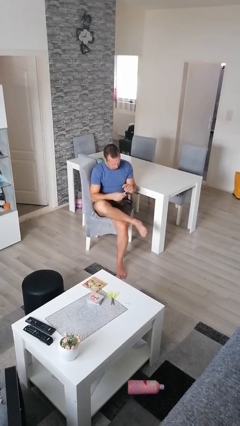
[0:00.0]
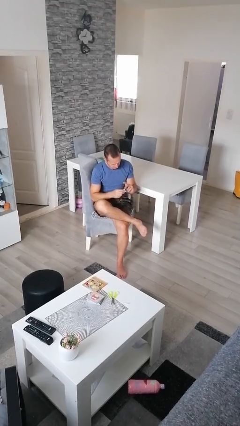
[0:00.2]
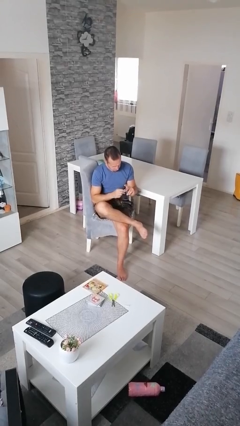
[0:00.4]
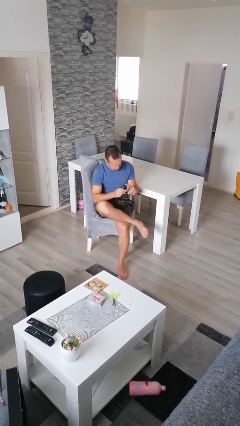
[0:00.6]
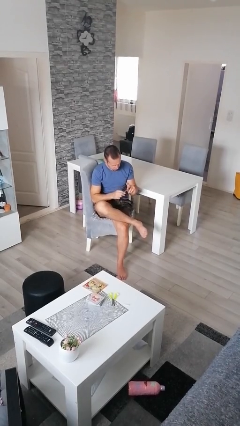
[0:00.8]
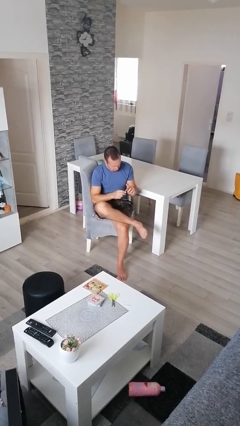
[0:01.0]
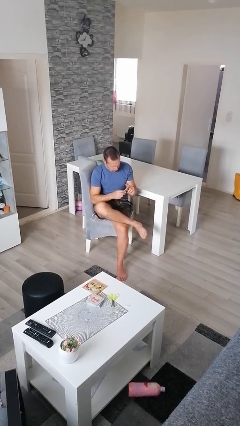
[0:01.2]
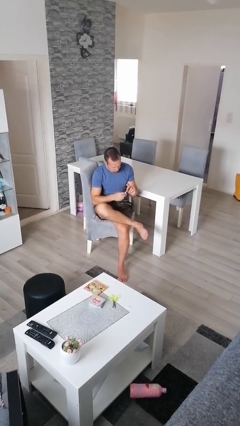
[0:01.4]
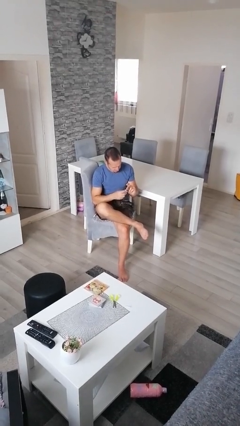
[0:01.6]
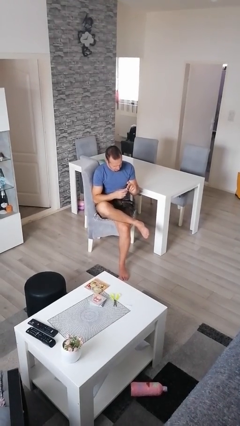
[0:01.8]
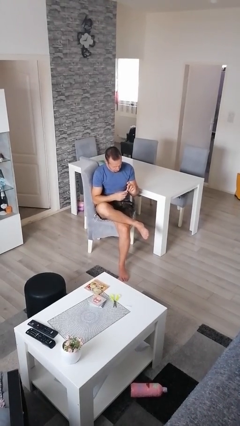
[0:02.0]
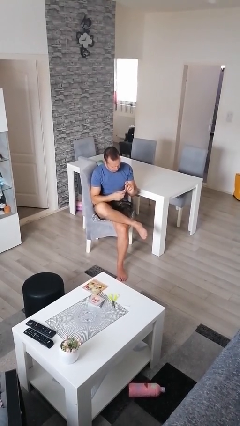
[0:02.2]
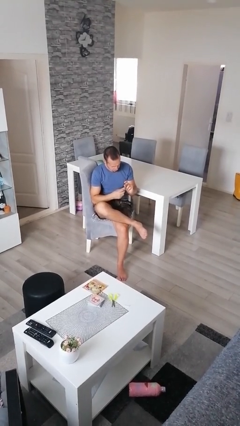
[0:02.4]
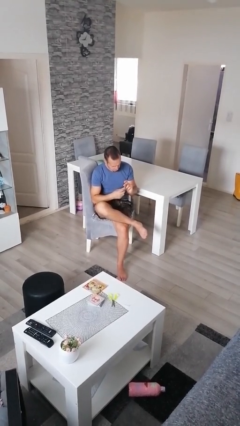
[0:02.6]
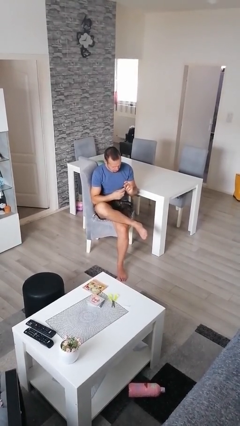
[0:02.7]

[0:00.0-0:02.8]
person files fingernails

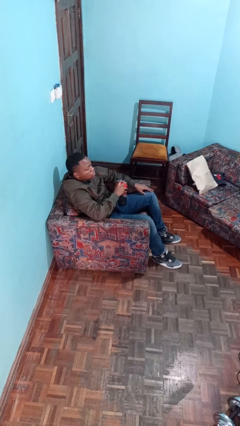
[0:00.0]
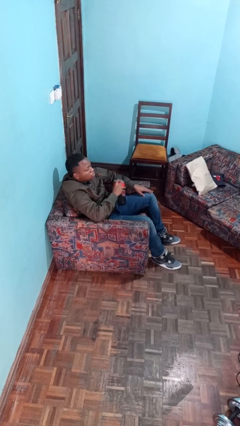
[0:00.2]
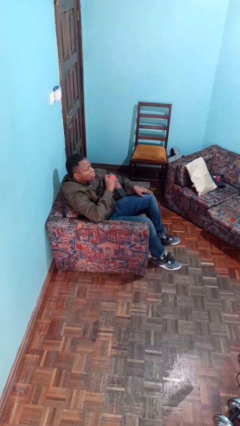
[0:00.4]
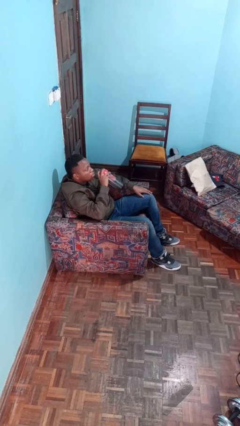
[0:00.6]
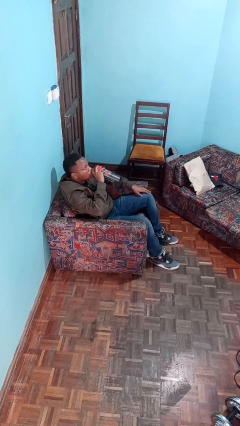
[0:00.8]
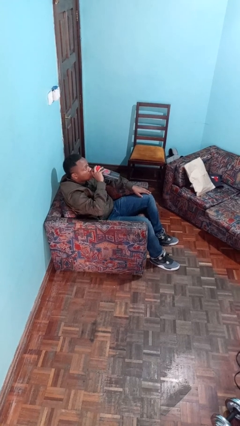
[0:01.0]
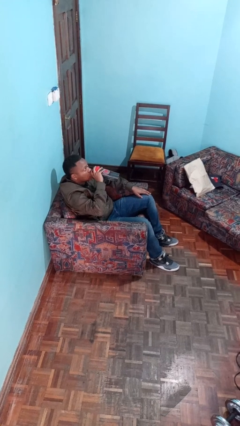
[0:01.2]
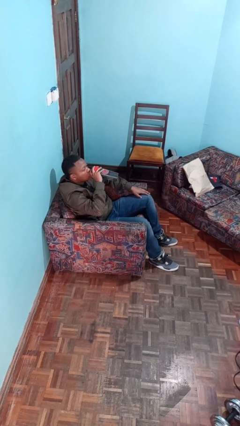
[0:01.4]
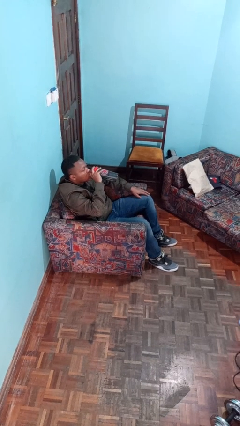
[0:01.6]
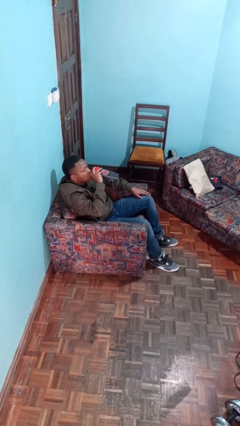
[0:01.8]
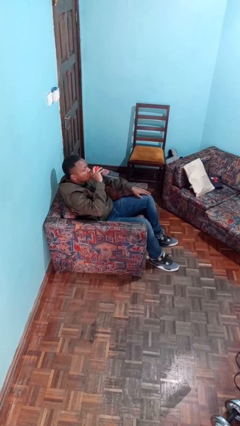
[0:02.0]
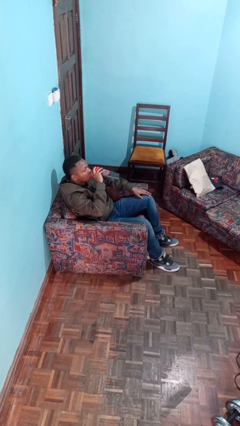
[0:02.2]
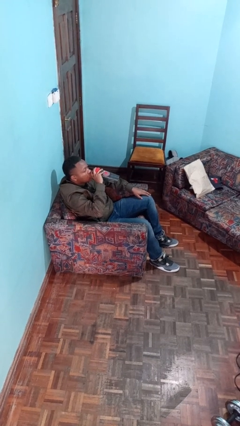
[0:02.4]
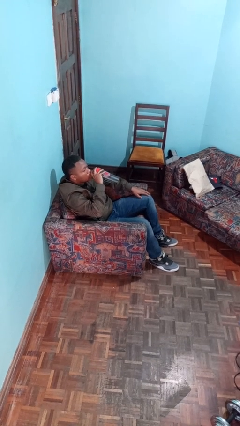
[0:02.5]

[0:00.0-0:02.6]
person drinks from bottle

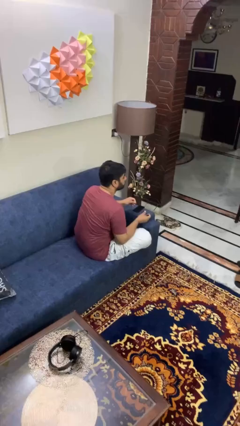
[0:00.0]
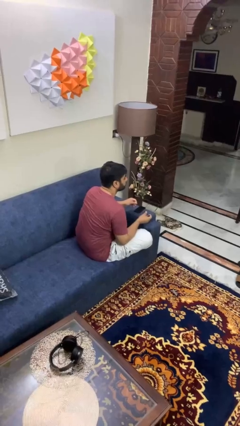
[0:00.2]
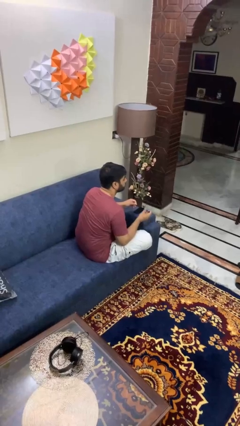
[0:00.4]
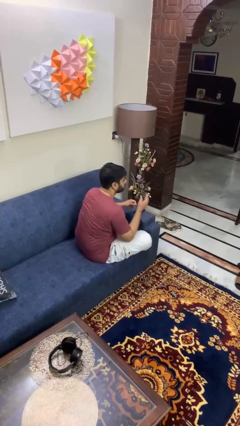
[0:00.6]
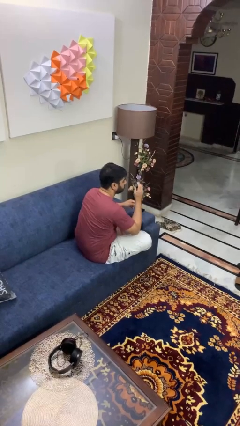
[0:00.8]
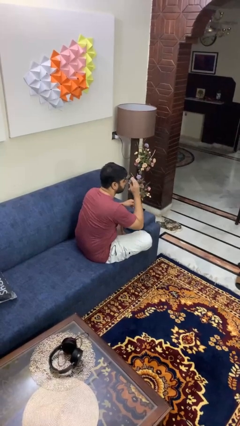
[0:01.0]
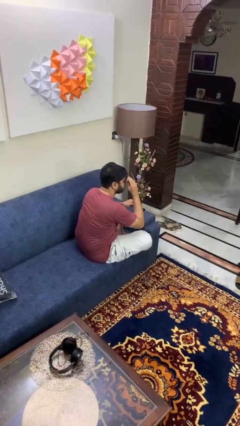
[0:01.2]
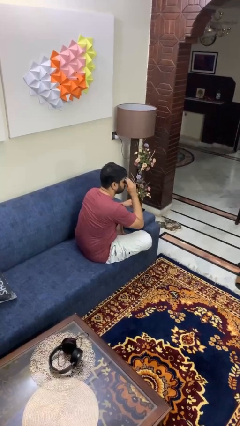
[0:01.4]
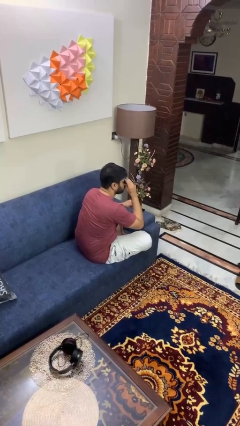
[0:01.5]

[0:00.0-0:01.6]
person puts on glasses

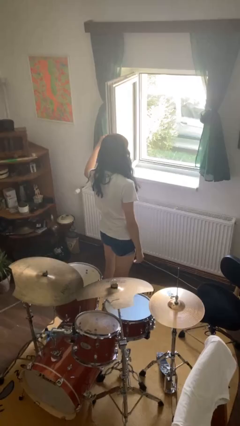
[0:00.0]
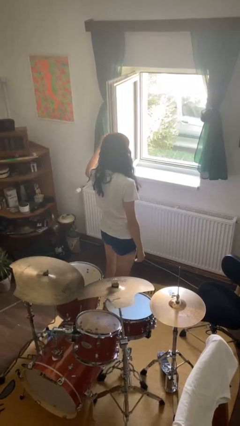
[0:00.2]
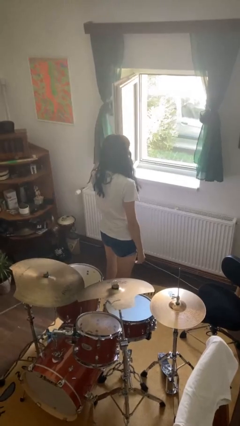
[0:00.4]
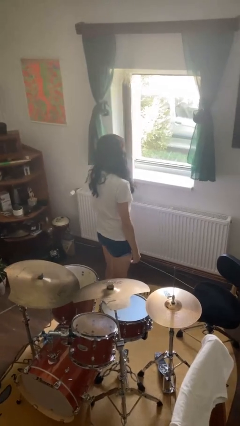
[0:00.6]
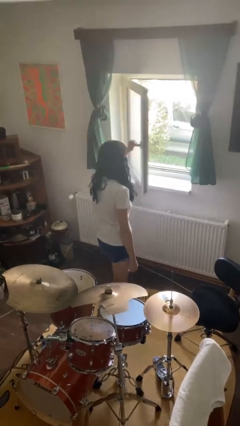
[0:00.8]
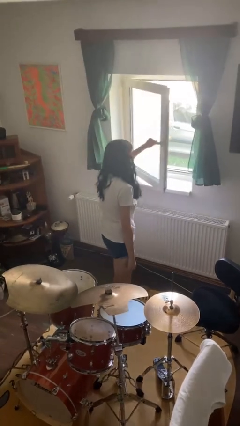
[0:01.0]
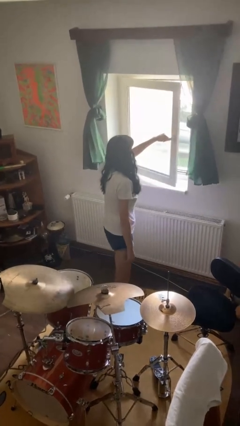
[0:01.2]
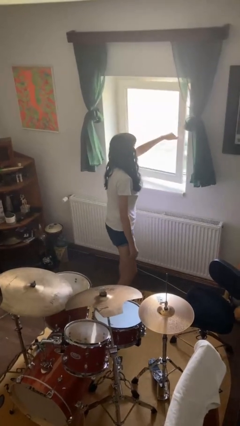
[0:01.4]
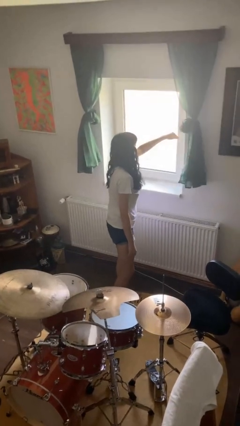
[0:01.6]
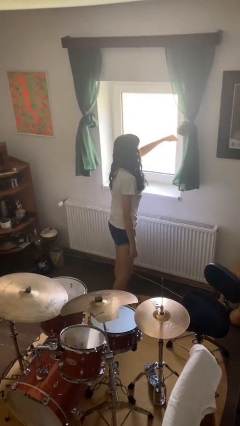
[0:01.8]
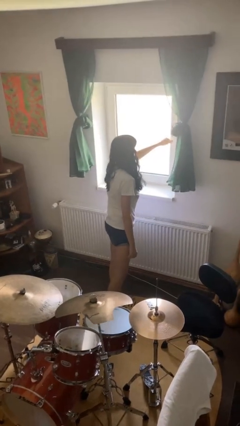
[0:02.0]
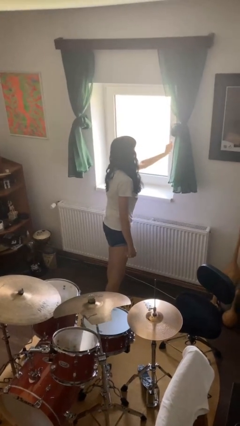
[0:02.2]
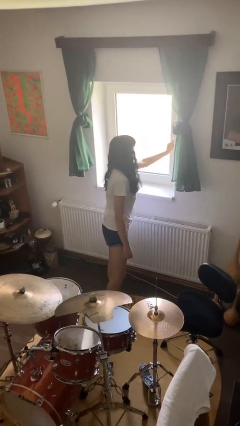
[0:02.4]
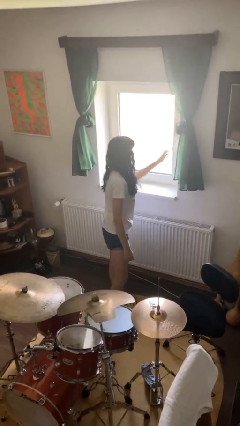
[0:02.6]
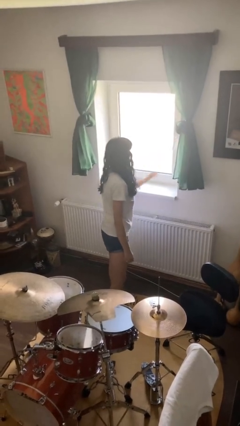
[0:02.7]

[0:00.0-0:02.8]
person closes home window

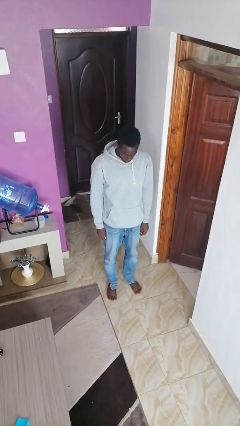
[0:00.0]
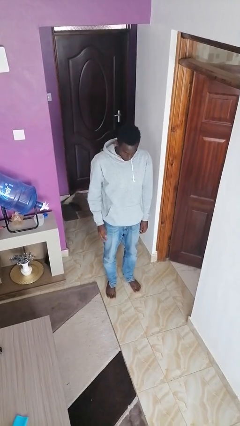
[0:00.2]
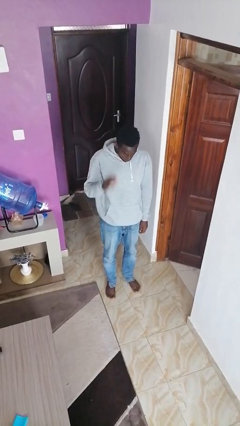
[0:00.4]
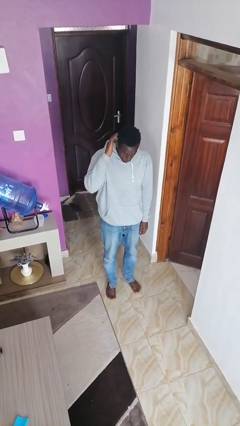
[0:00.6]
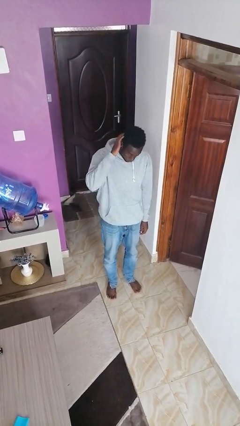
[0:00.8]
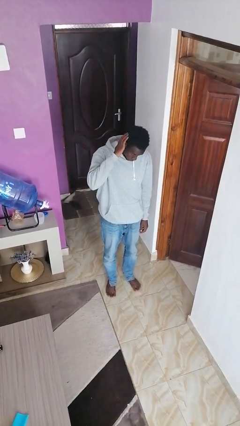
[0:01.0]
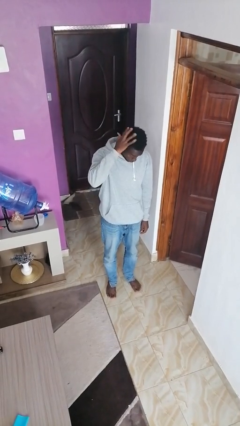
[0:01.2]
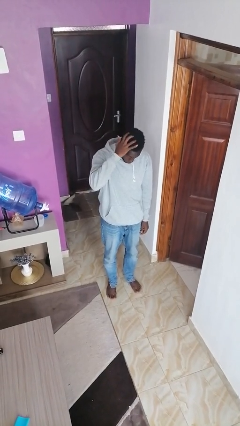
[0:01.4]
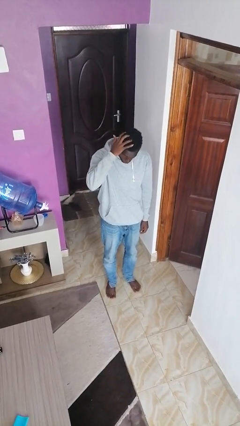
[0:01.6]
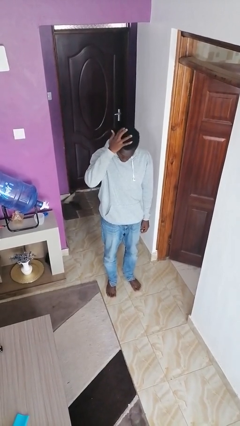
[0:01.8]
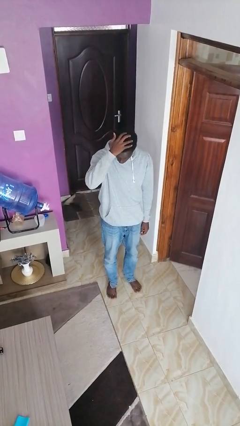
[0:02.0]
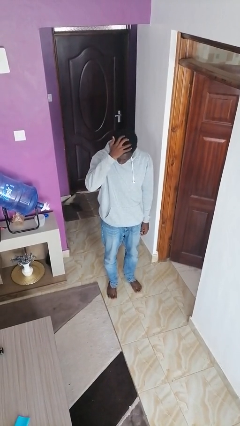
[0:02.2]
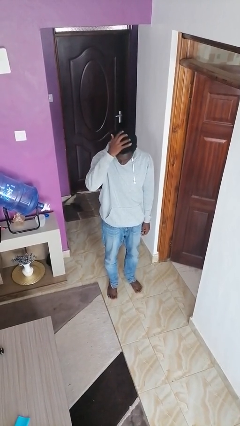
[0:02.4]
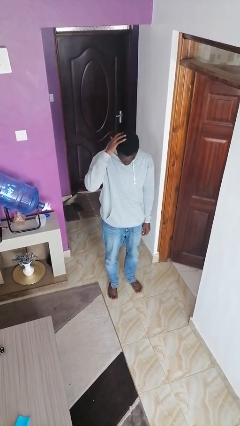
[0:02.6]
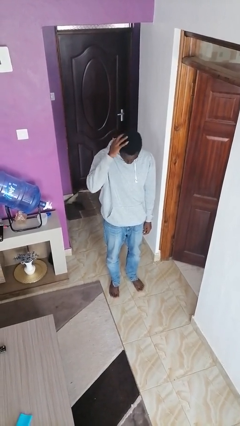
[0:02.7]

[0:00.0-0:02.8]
person strokes hair

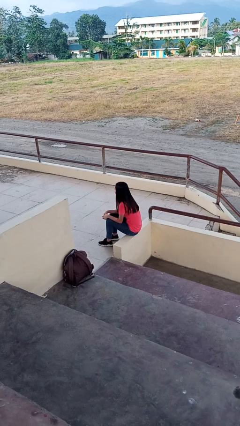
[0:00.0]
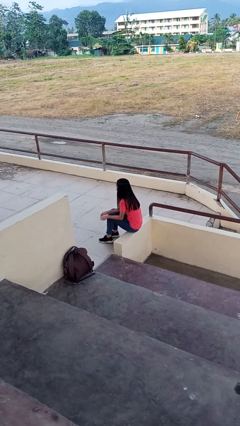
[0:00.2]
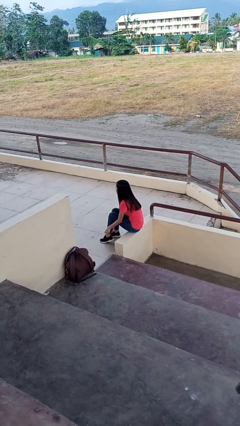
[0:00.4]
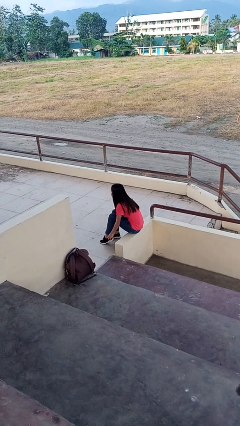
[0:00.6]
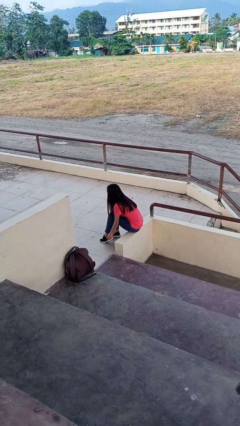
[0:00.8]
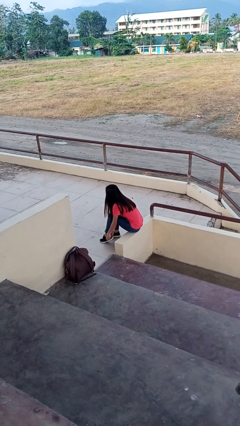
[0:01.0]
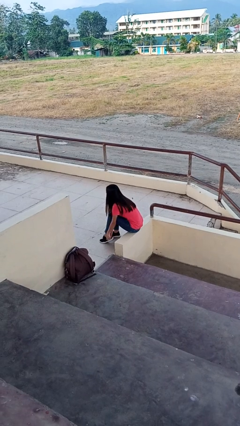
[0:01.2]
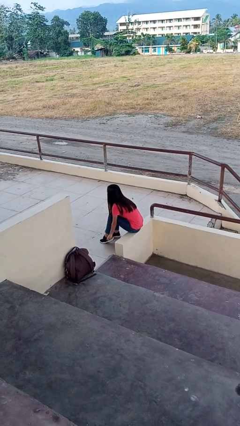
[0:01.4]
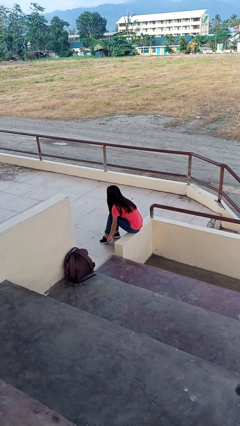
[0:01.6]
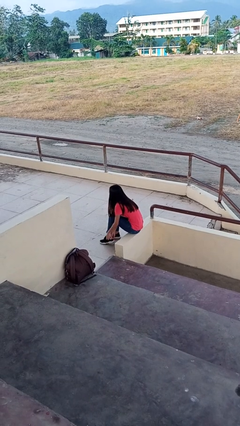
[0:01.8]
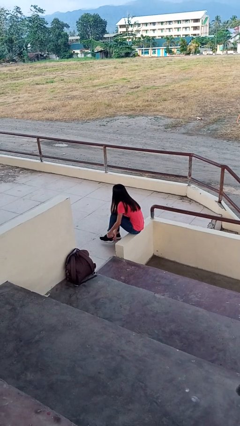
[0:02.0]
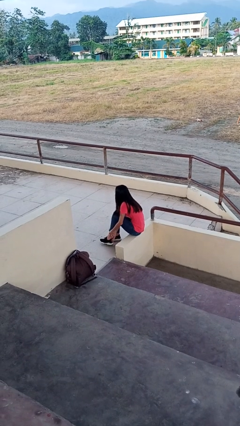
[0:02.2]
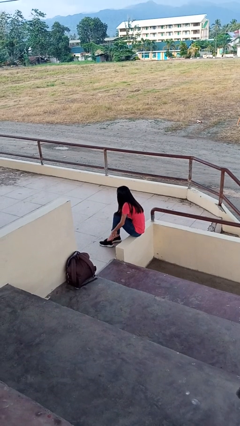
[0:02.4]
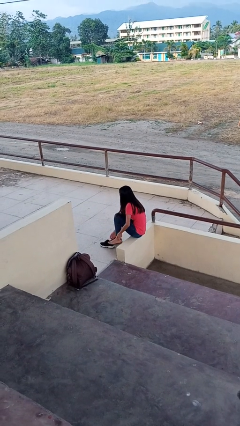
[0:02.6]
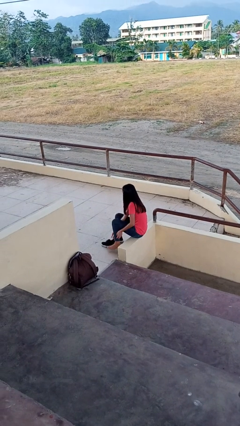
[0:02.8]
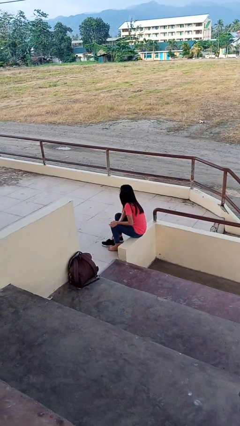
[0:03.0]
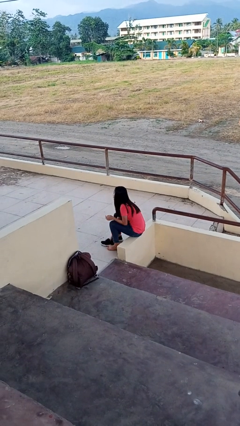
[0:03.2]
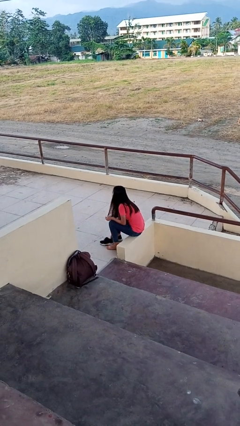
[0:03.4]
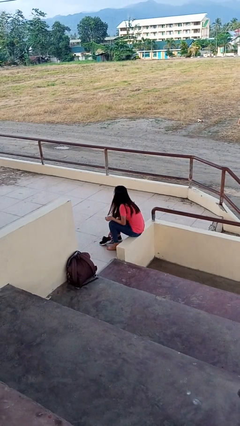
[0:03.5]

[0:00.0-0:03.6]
person takes off shoes

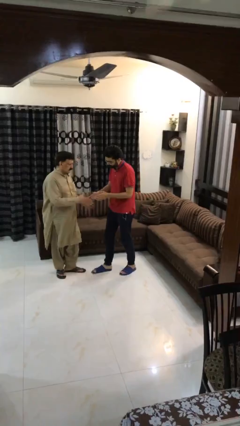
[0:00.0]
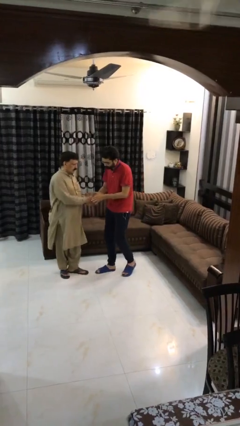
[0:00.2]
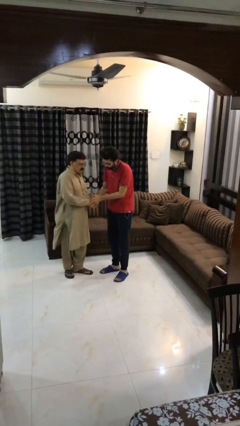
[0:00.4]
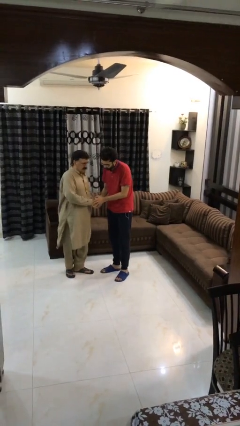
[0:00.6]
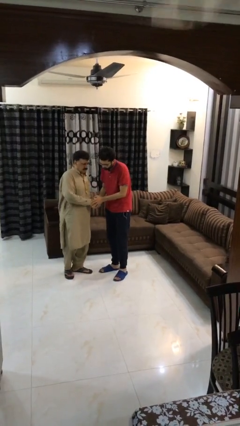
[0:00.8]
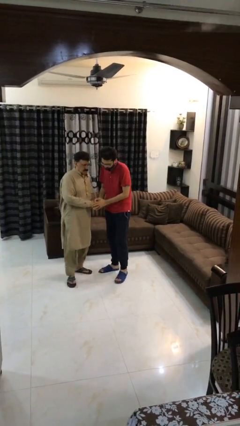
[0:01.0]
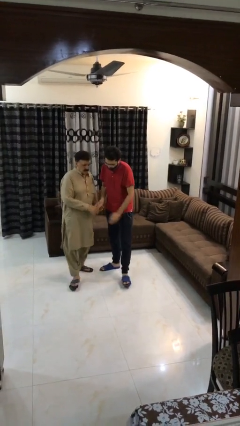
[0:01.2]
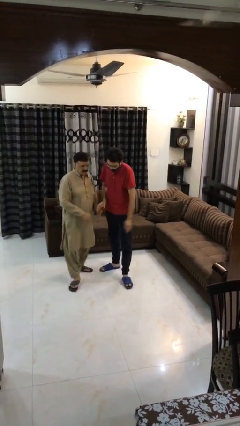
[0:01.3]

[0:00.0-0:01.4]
person shakes hand
